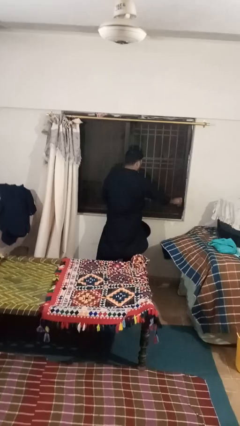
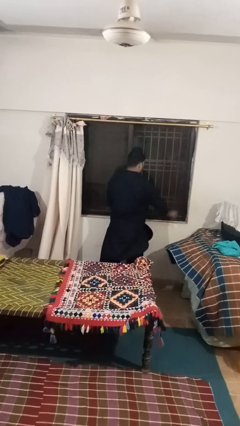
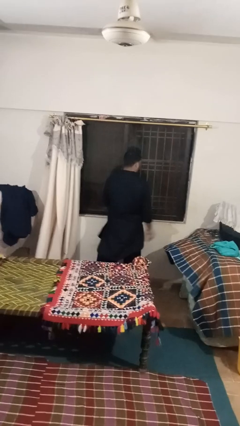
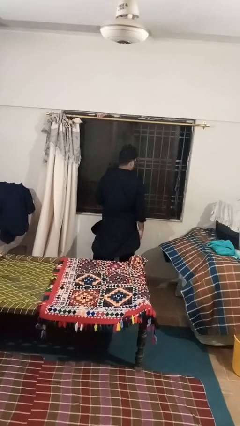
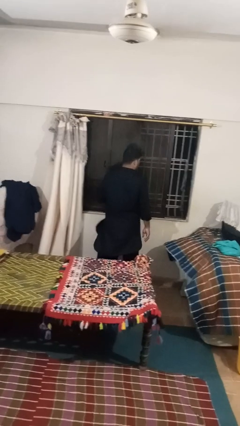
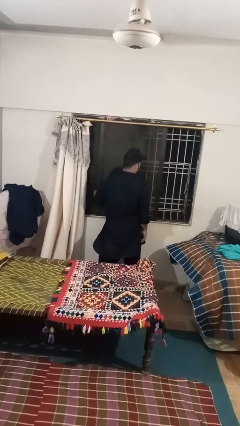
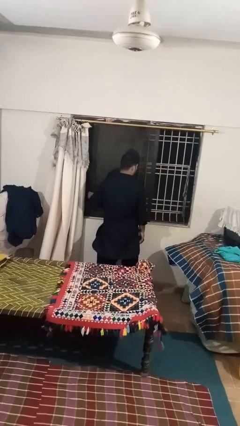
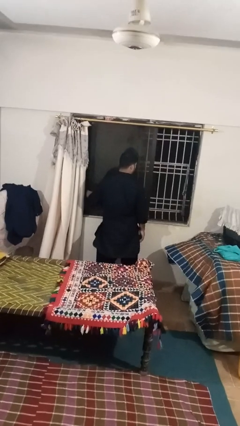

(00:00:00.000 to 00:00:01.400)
person opens sliding door

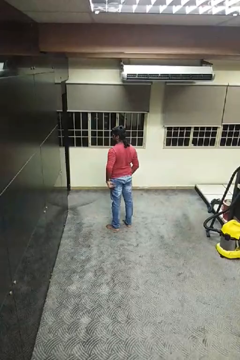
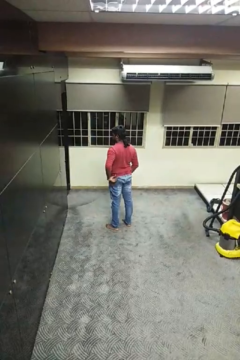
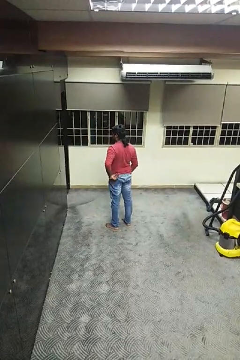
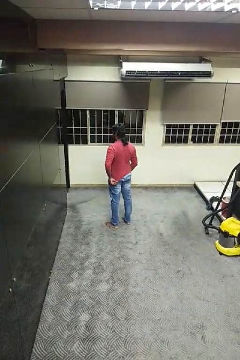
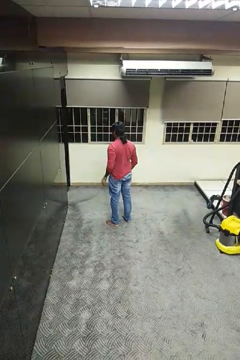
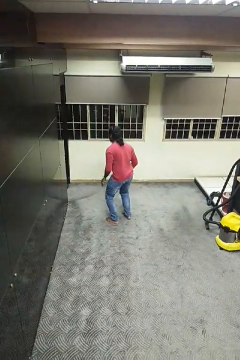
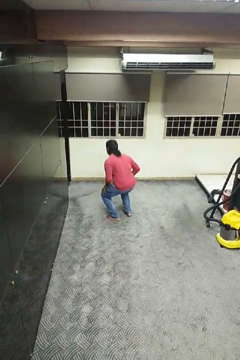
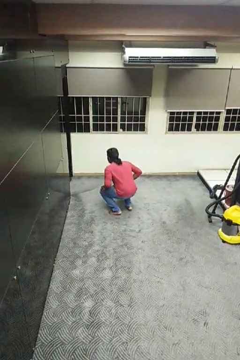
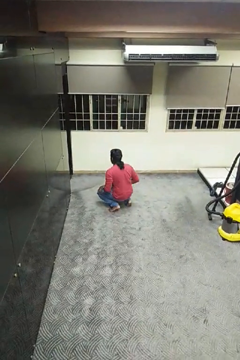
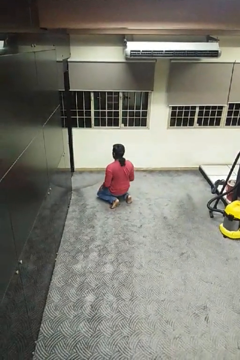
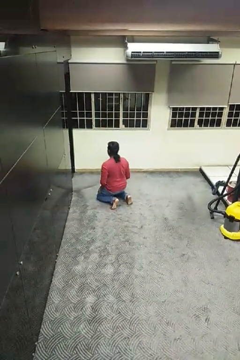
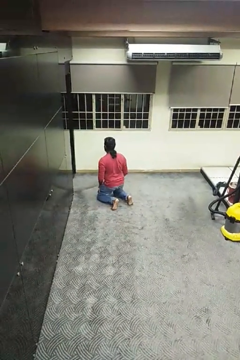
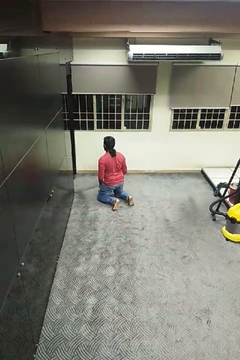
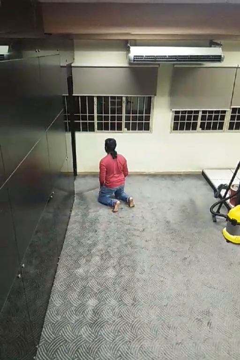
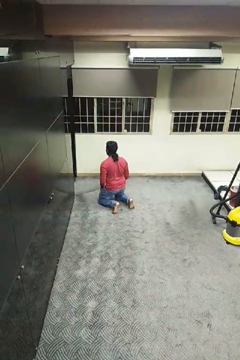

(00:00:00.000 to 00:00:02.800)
person kneels

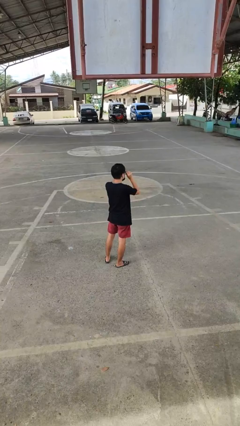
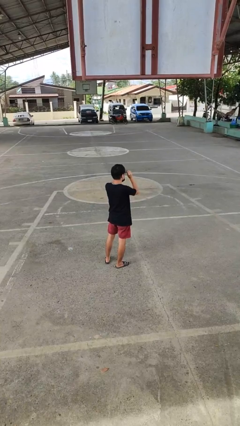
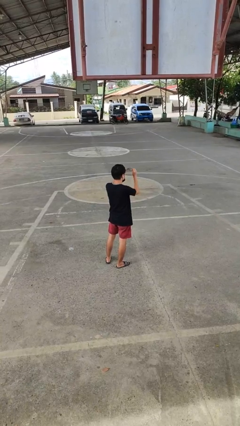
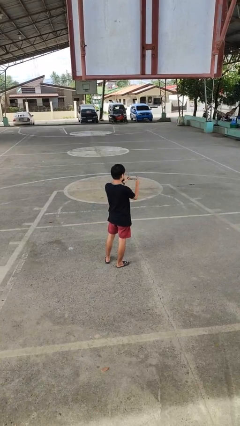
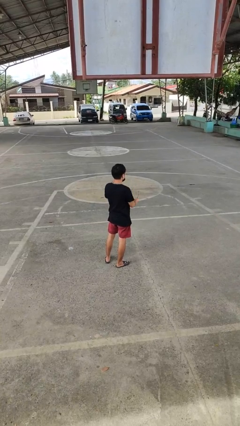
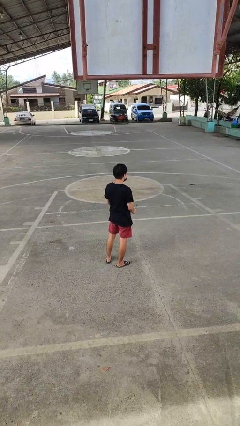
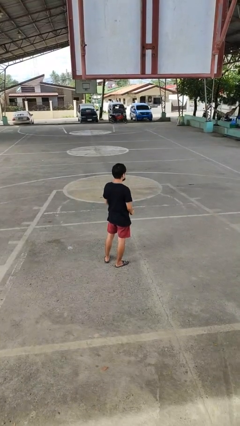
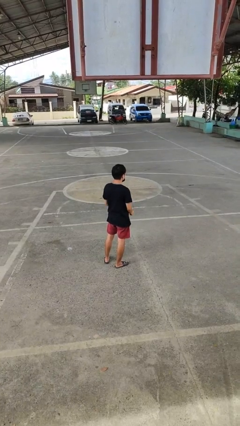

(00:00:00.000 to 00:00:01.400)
person takes off glasses

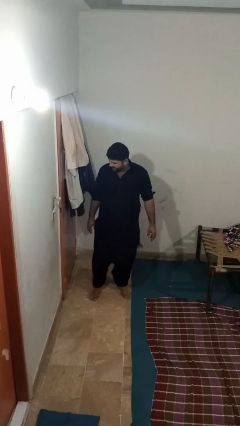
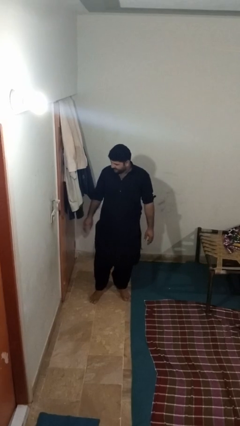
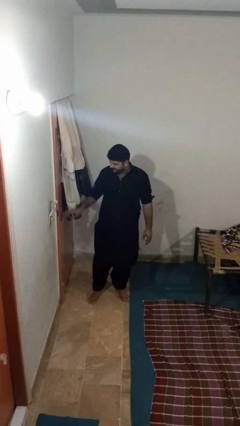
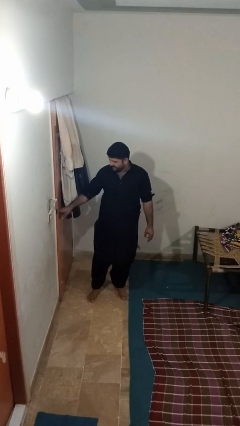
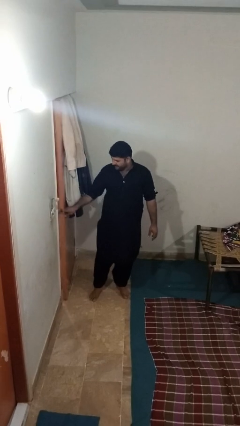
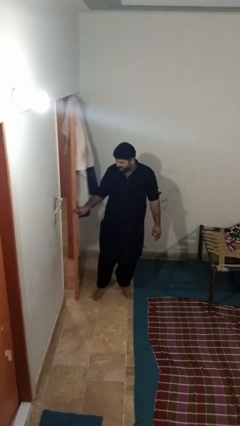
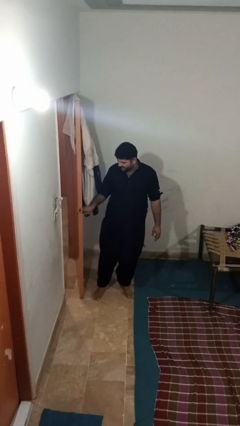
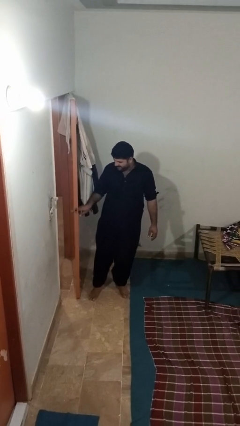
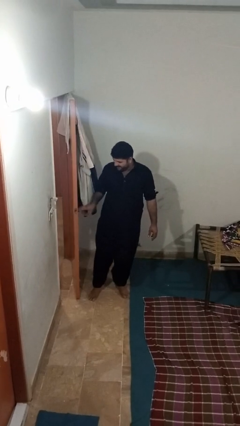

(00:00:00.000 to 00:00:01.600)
person opens facility door

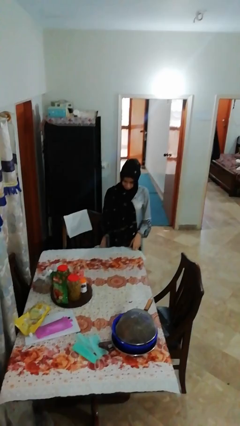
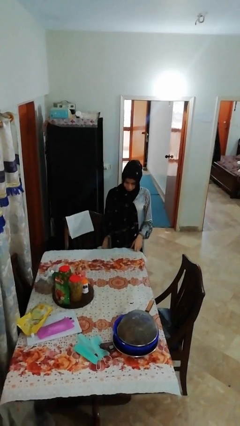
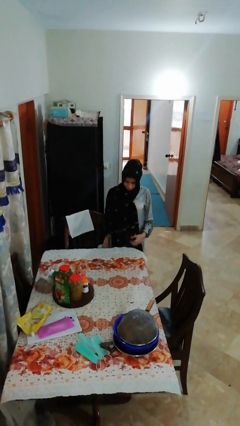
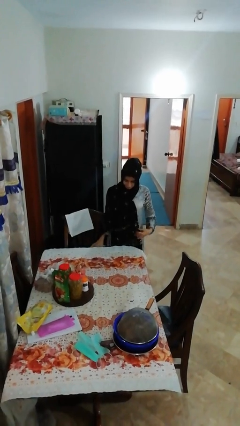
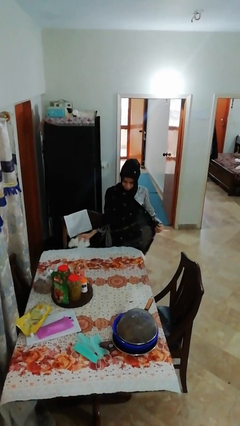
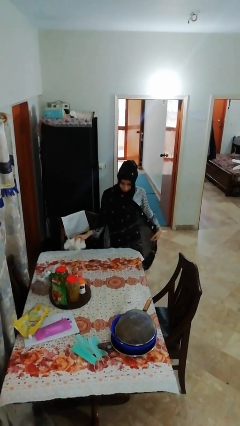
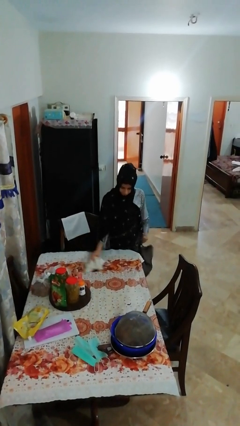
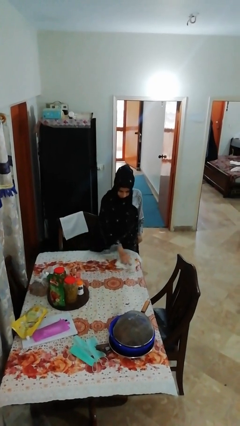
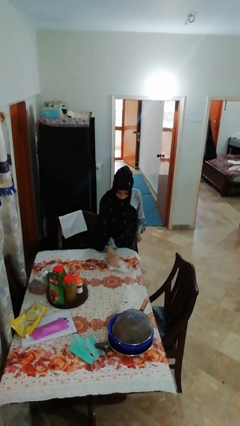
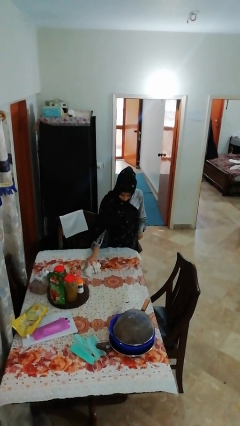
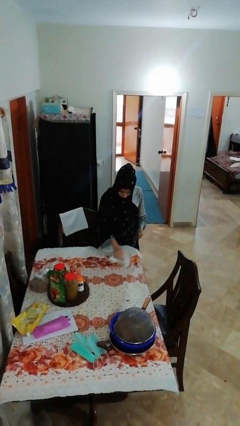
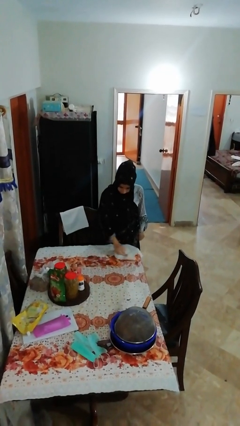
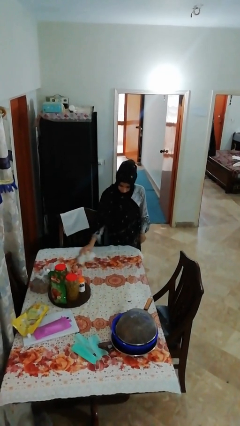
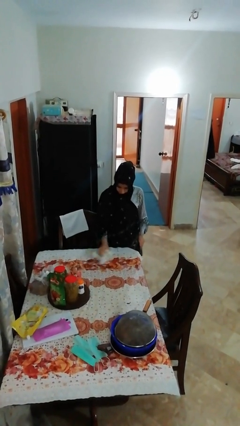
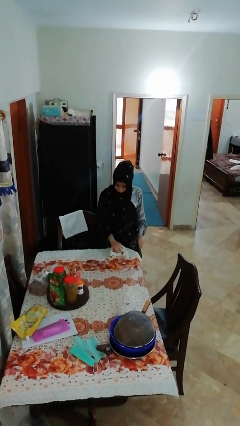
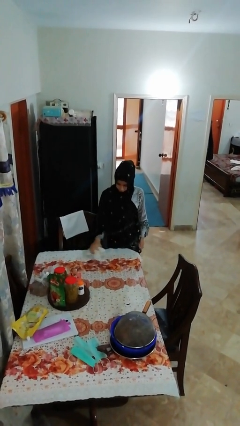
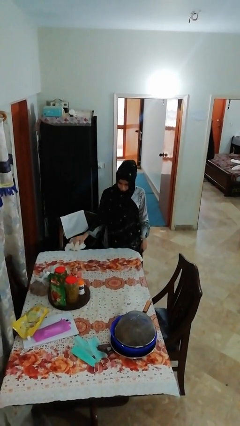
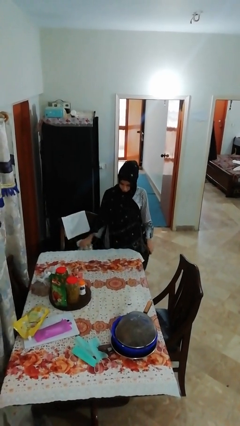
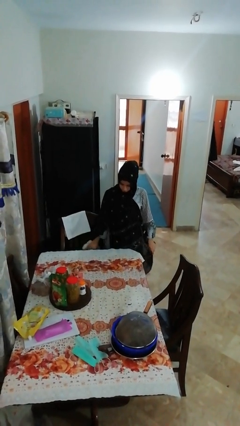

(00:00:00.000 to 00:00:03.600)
person cleans table with rag

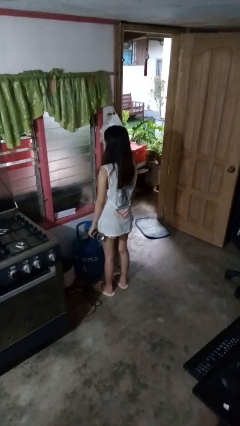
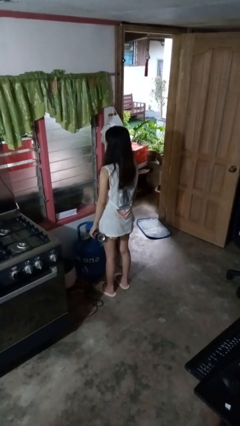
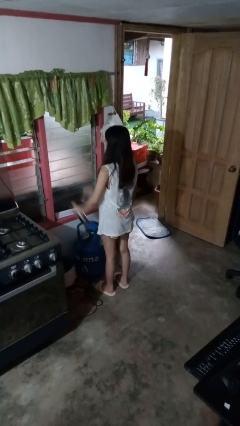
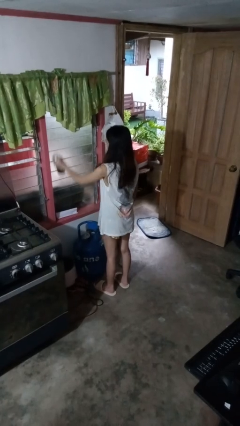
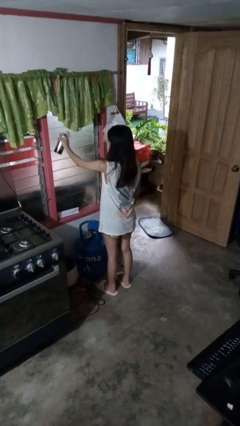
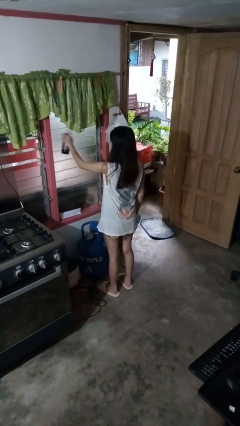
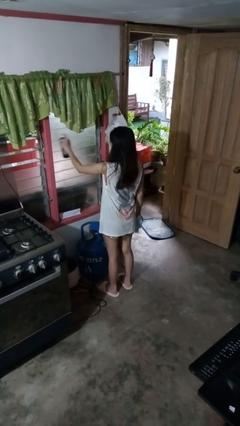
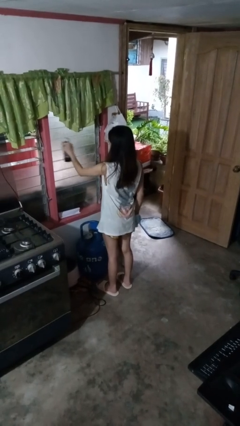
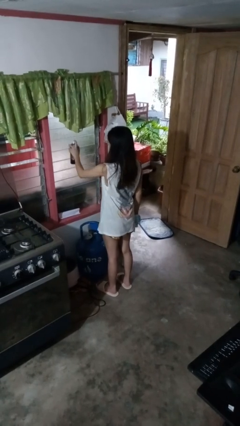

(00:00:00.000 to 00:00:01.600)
person sprays from bottle

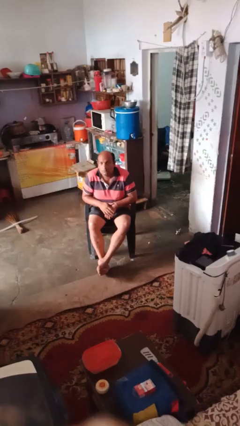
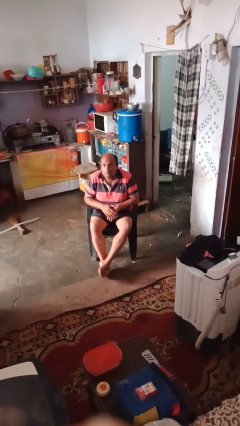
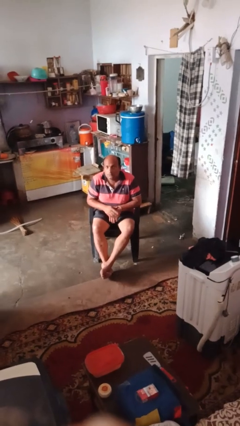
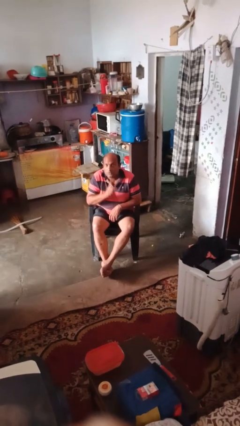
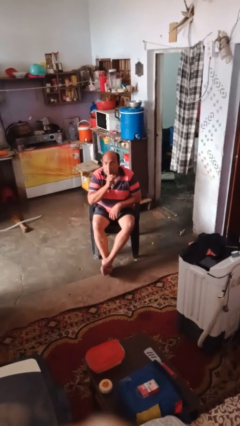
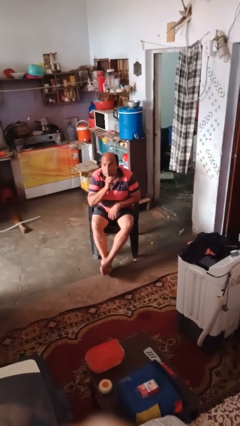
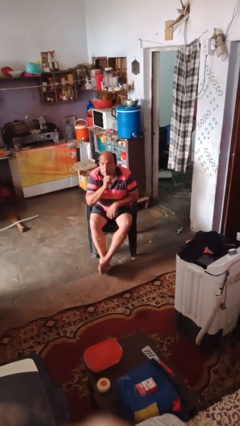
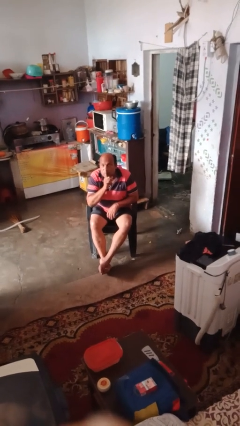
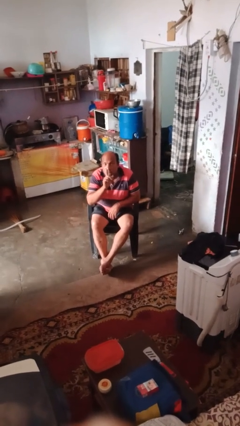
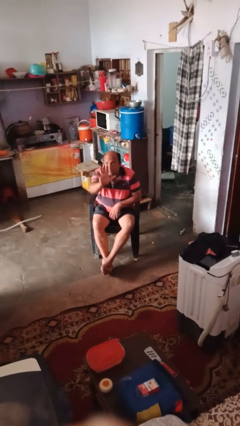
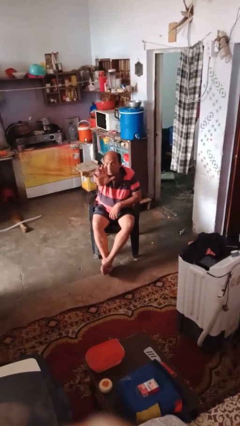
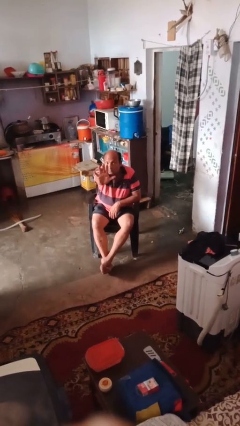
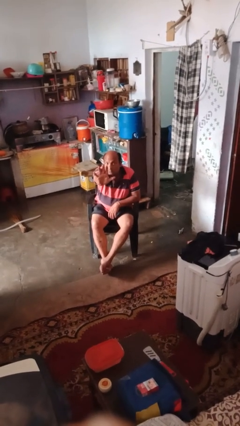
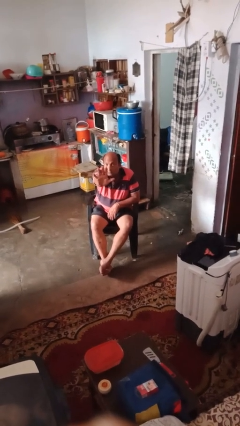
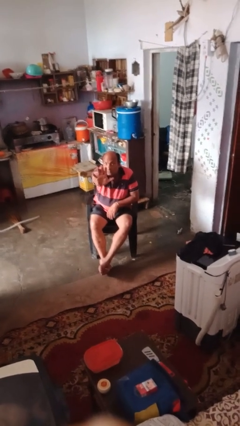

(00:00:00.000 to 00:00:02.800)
person gestures be quiet

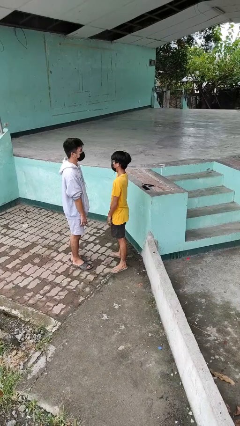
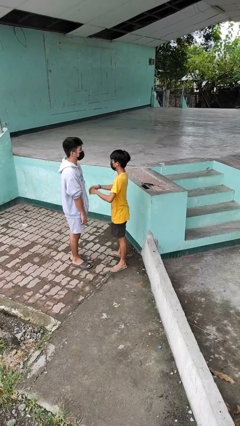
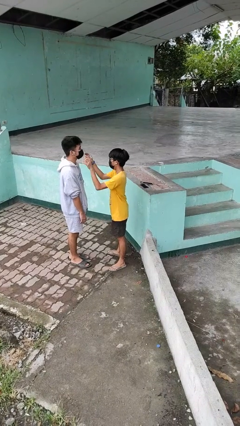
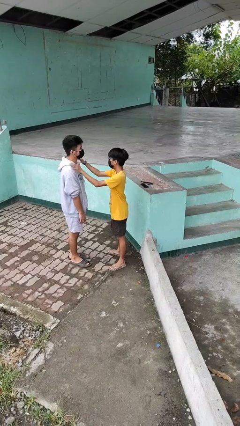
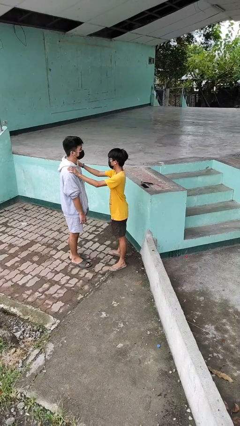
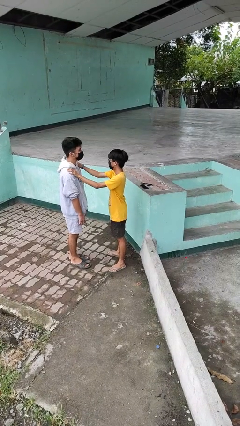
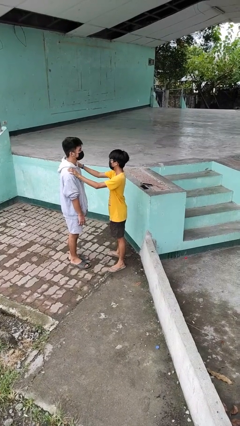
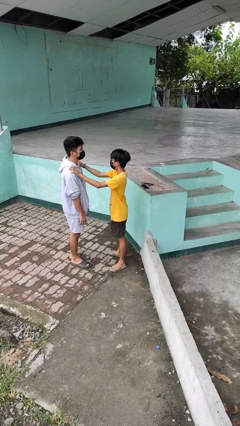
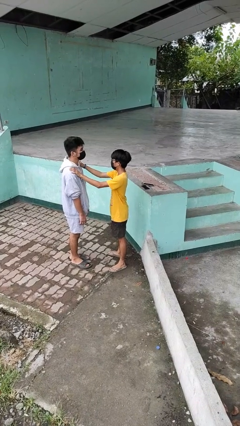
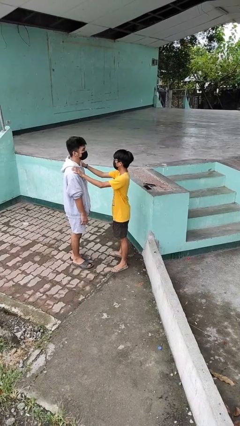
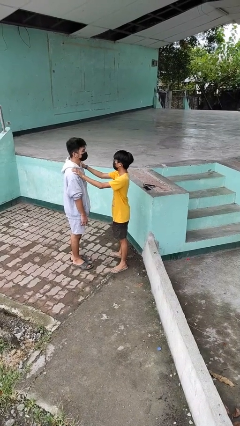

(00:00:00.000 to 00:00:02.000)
person grabs person by shoulder

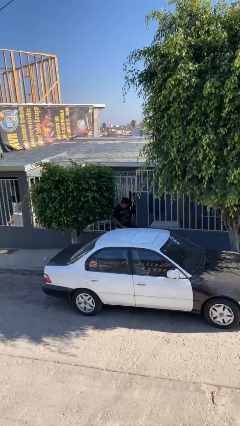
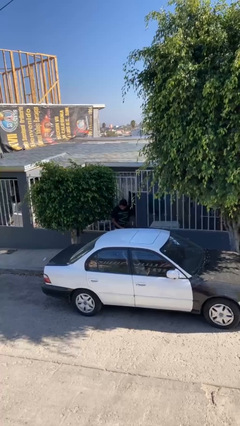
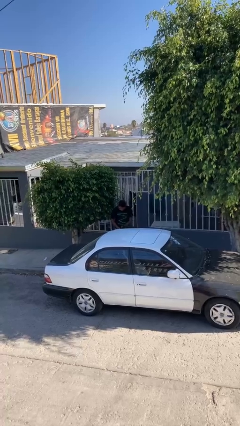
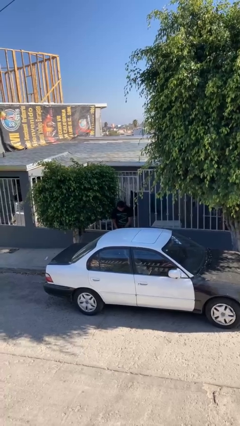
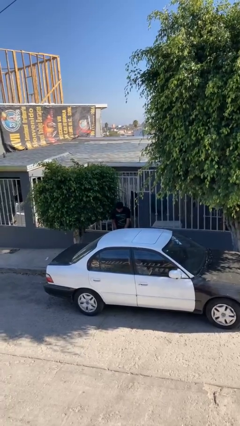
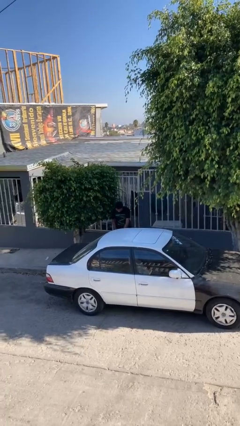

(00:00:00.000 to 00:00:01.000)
person closes car door
